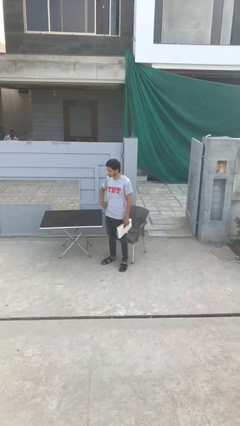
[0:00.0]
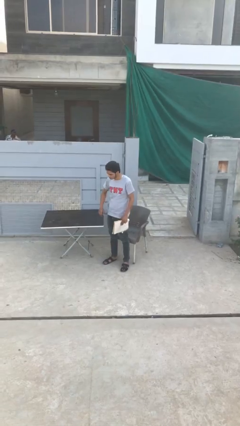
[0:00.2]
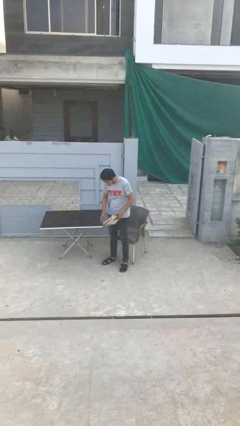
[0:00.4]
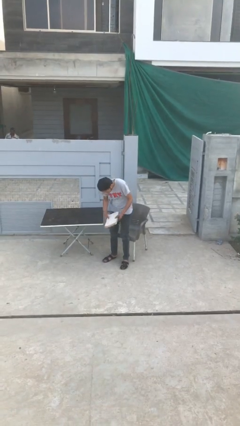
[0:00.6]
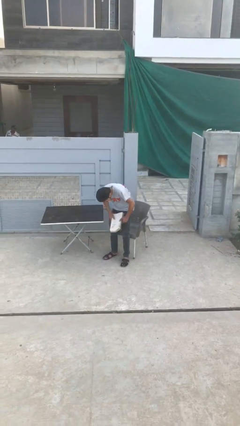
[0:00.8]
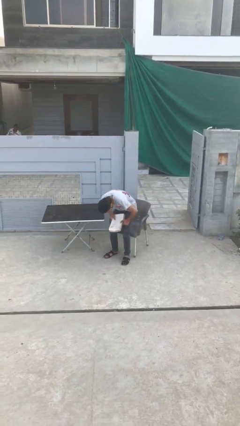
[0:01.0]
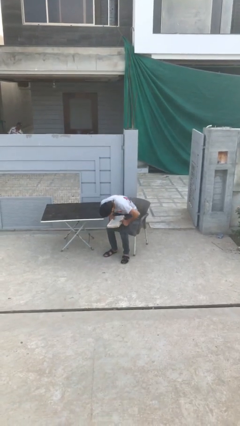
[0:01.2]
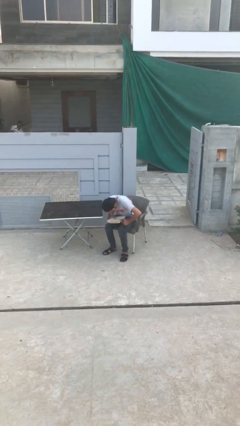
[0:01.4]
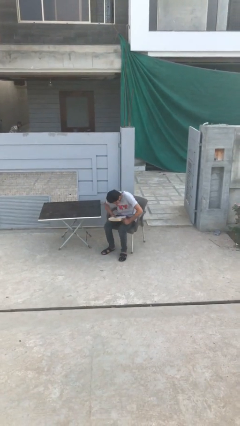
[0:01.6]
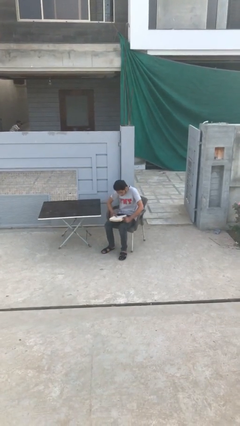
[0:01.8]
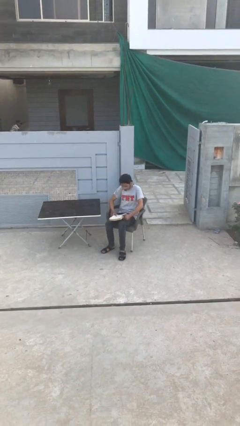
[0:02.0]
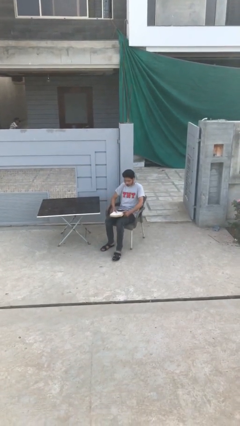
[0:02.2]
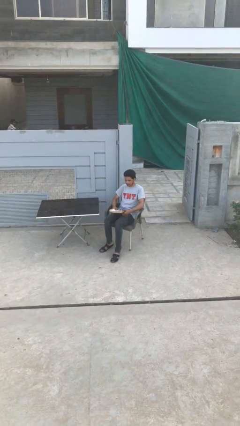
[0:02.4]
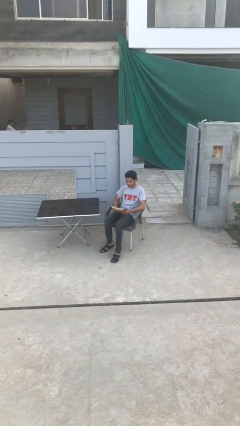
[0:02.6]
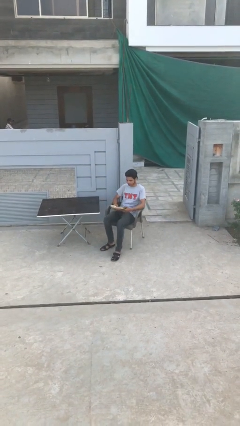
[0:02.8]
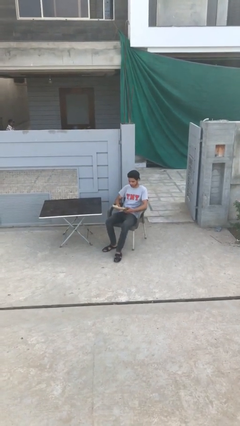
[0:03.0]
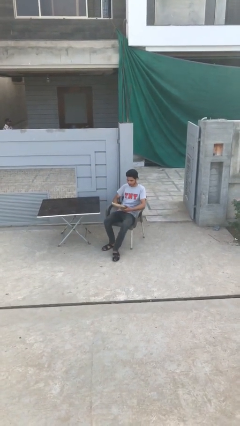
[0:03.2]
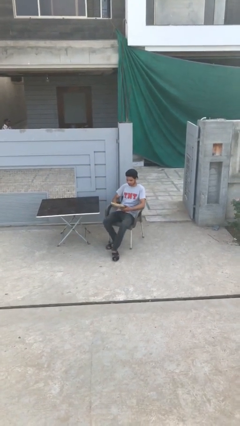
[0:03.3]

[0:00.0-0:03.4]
person sits down

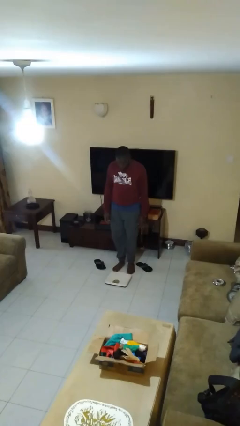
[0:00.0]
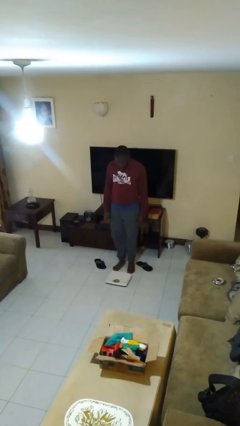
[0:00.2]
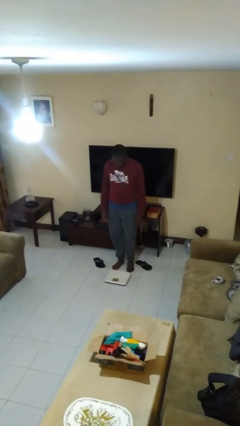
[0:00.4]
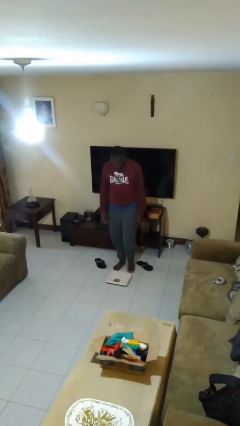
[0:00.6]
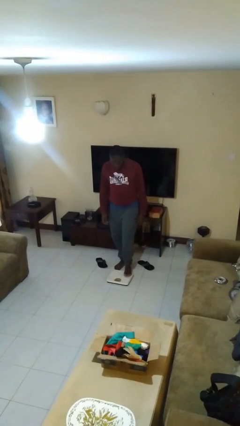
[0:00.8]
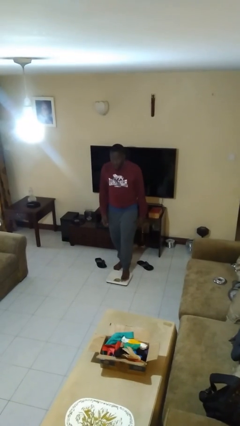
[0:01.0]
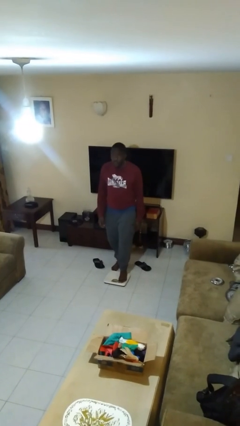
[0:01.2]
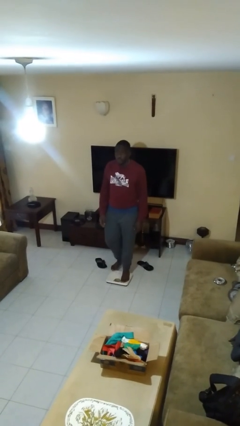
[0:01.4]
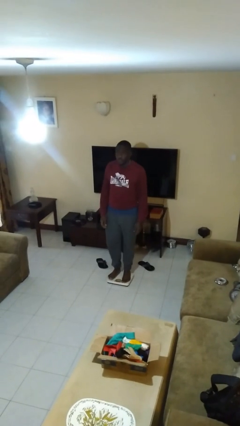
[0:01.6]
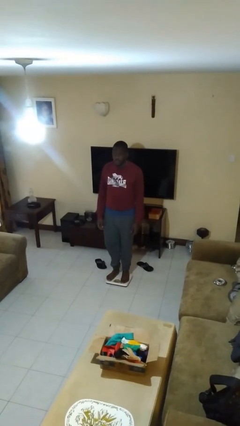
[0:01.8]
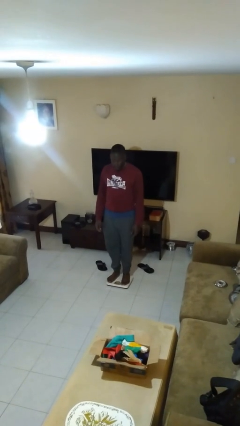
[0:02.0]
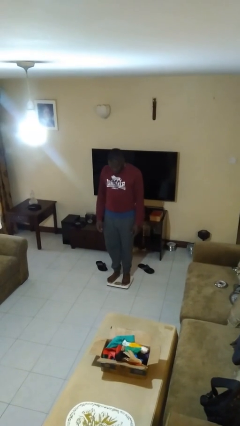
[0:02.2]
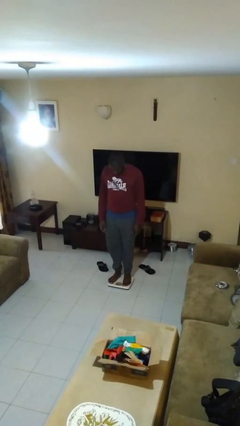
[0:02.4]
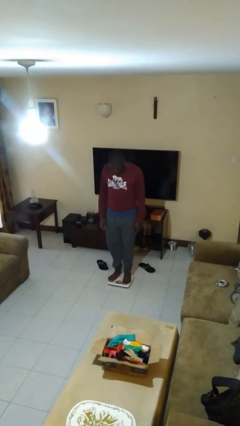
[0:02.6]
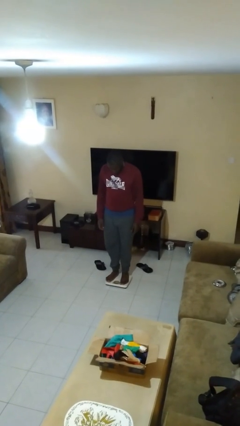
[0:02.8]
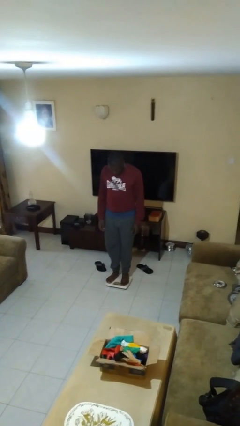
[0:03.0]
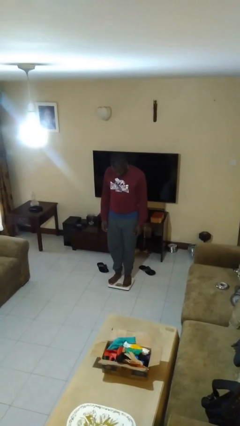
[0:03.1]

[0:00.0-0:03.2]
person uses bodyweight scale

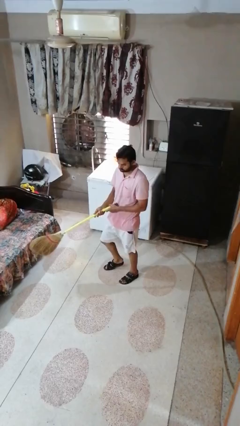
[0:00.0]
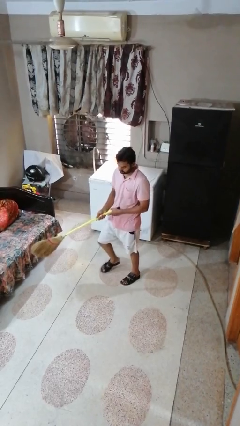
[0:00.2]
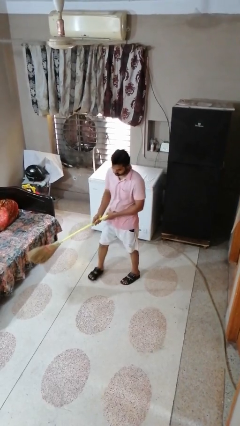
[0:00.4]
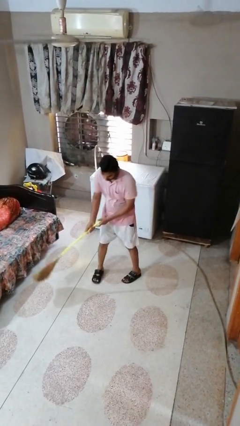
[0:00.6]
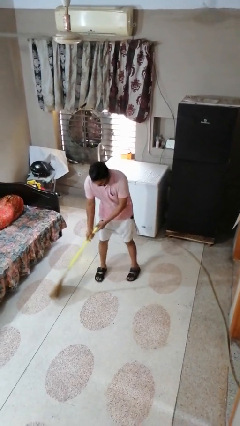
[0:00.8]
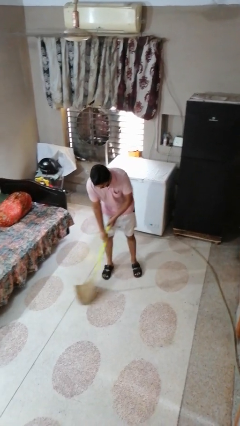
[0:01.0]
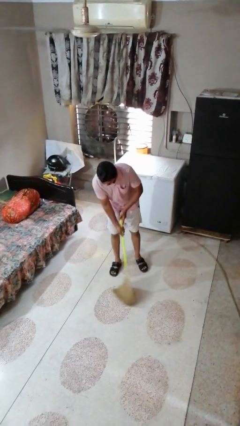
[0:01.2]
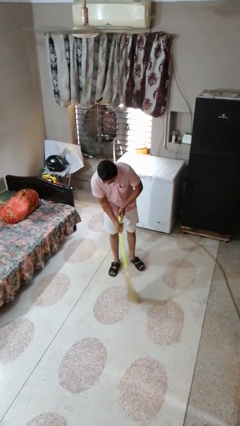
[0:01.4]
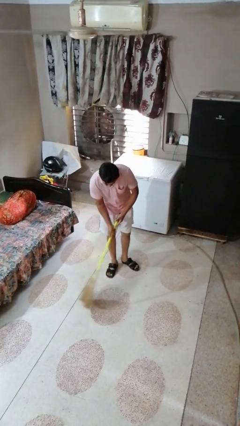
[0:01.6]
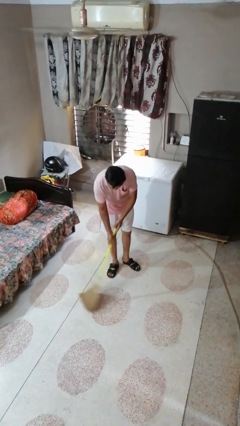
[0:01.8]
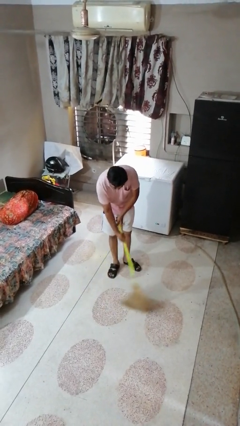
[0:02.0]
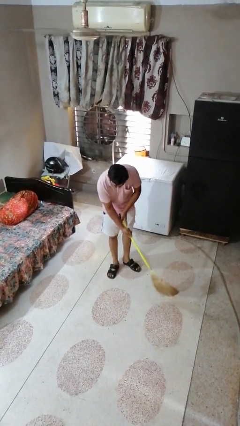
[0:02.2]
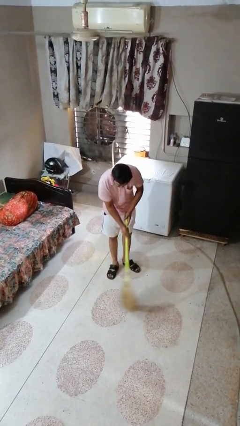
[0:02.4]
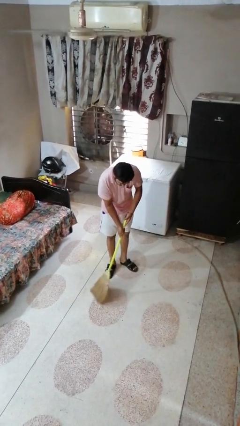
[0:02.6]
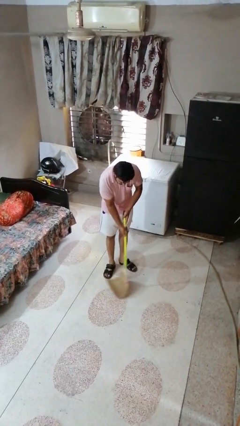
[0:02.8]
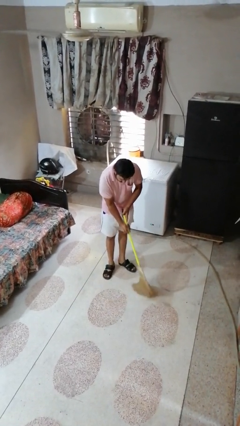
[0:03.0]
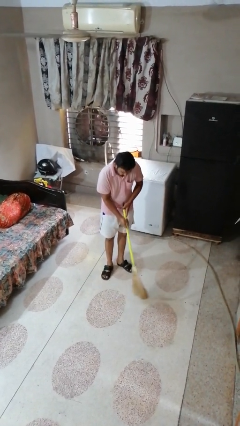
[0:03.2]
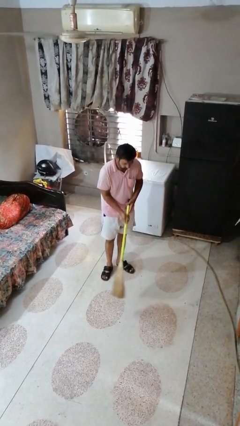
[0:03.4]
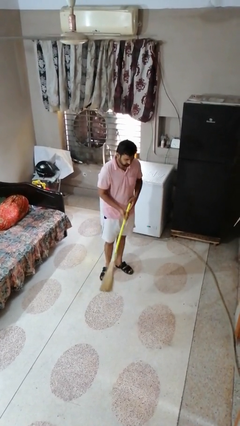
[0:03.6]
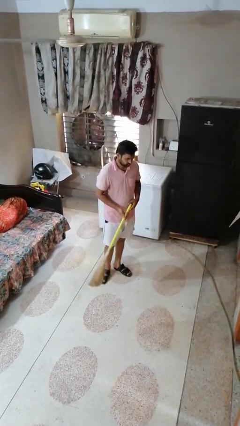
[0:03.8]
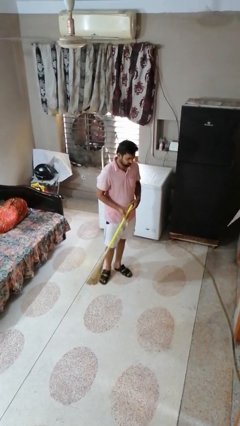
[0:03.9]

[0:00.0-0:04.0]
person sweeps floor

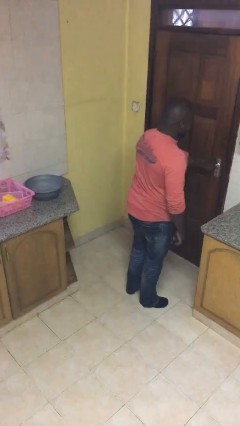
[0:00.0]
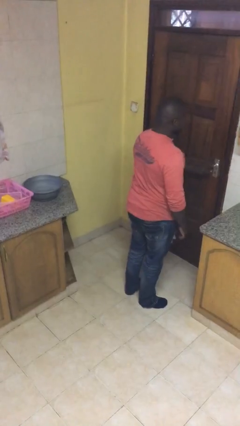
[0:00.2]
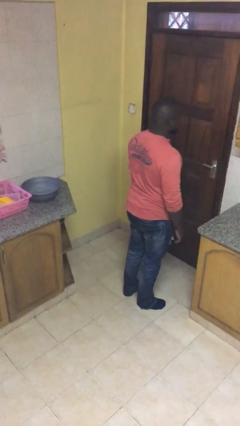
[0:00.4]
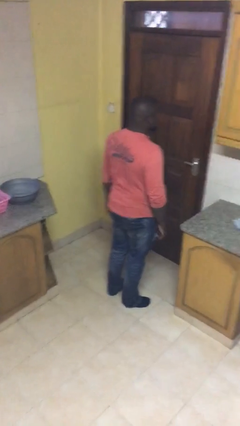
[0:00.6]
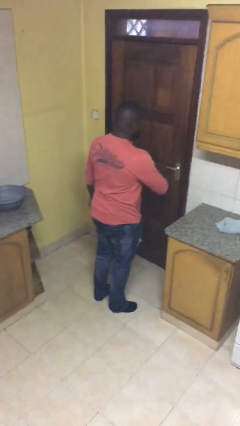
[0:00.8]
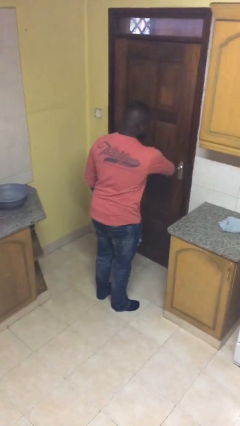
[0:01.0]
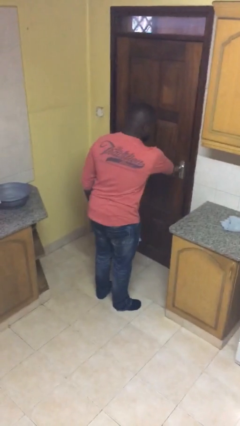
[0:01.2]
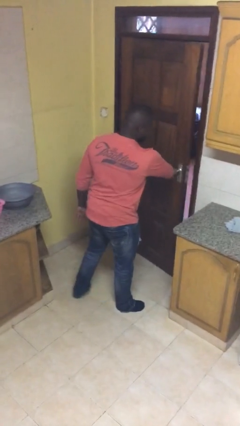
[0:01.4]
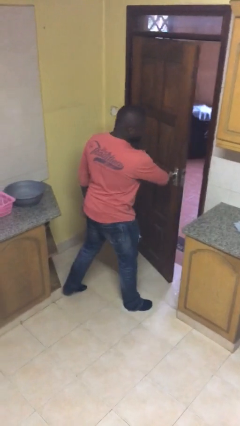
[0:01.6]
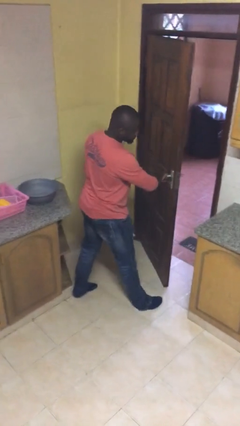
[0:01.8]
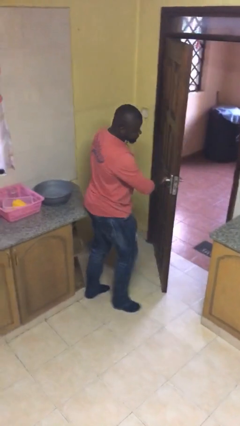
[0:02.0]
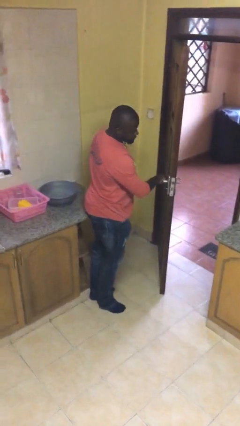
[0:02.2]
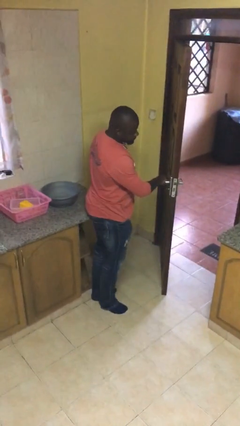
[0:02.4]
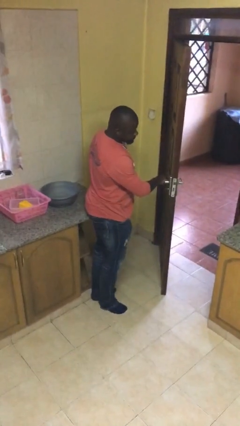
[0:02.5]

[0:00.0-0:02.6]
person opens facility door

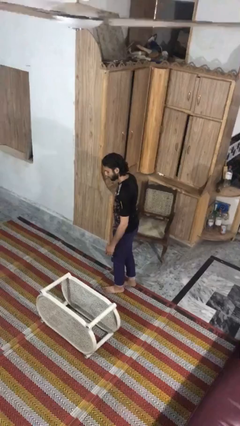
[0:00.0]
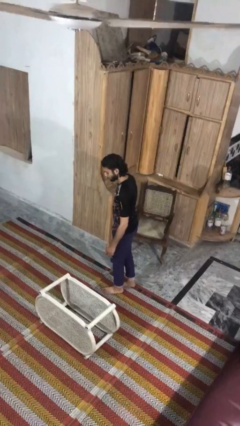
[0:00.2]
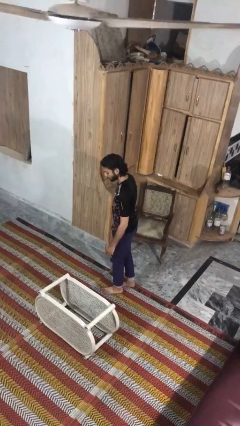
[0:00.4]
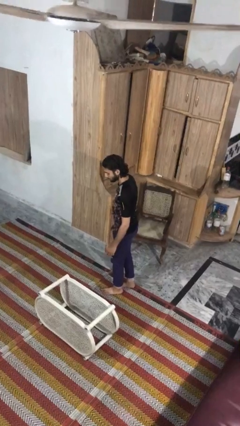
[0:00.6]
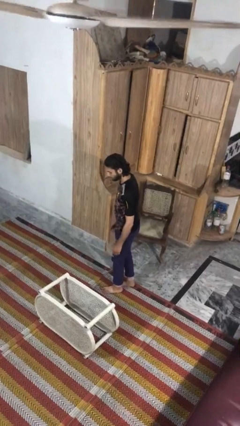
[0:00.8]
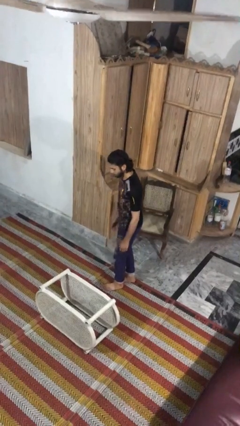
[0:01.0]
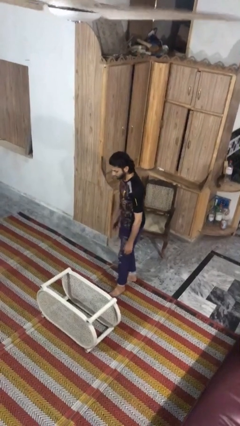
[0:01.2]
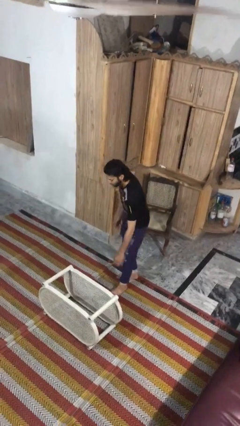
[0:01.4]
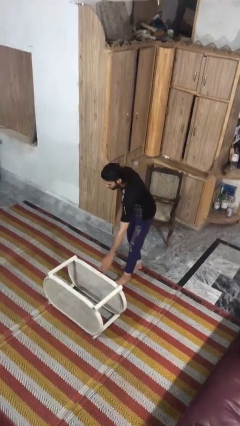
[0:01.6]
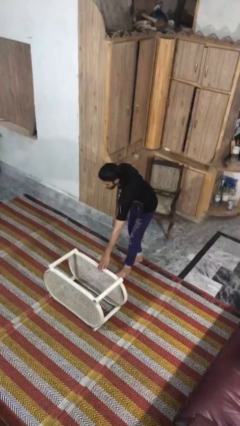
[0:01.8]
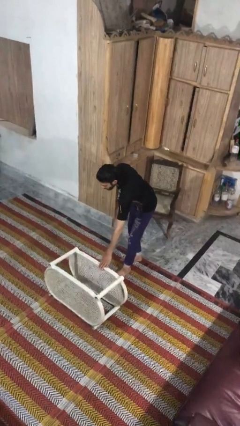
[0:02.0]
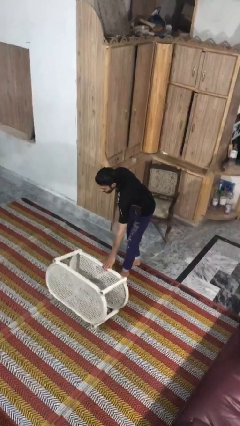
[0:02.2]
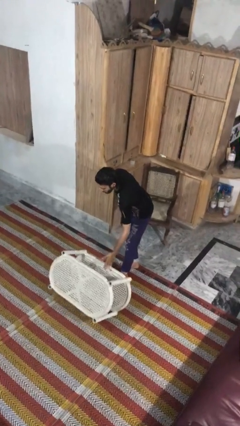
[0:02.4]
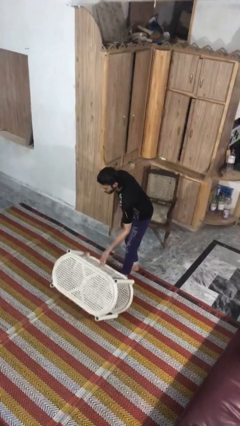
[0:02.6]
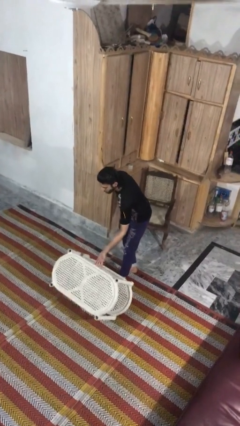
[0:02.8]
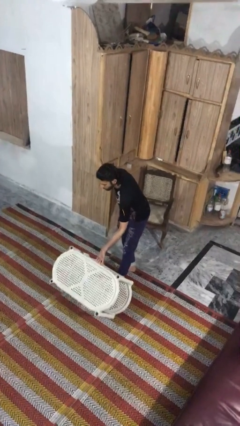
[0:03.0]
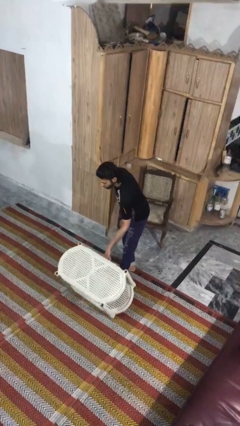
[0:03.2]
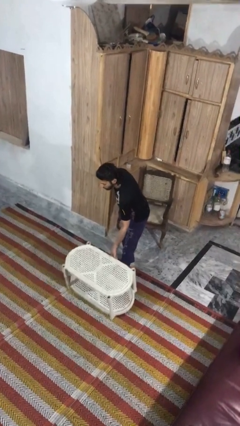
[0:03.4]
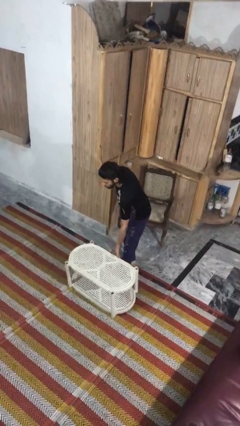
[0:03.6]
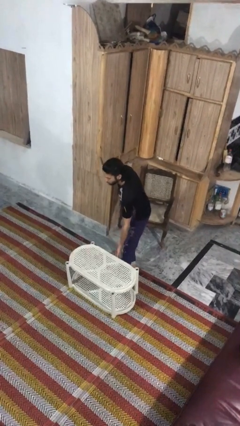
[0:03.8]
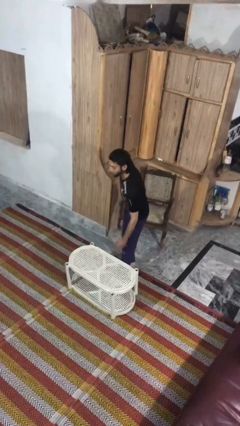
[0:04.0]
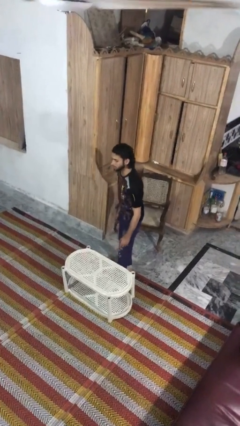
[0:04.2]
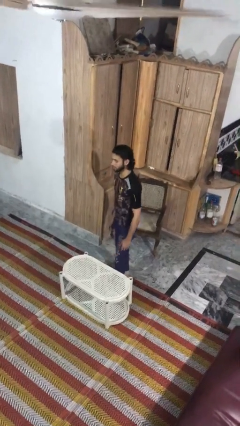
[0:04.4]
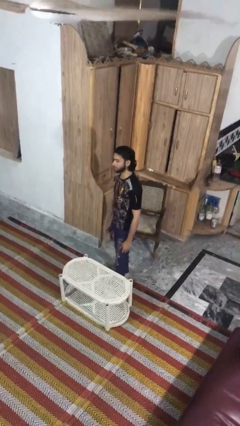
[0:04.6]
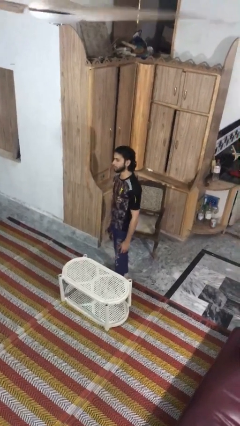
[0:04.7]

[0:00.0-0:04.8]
person sets upright furniture
